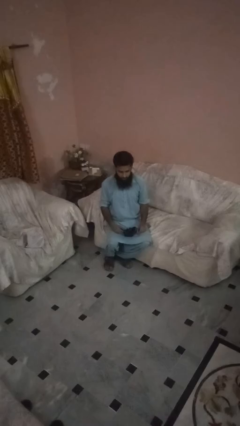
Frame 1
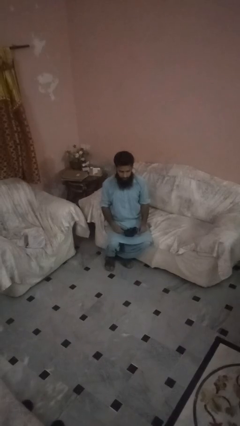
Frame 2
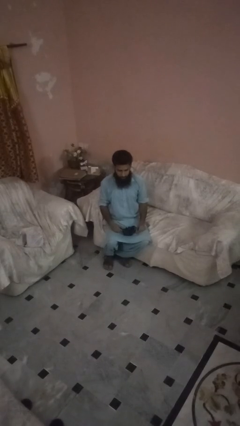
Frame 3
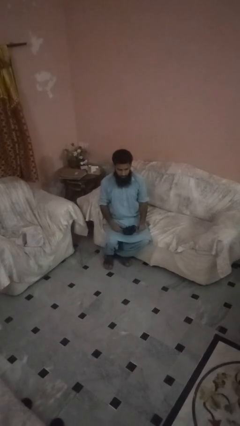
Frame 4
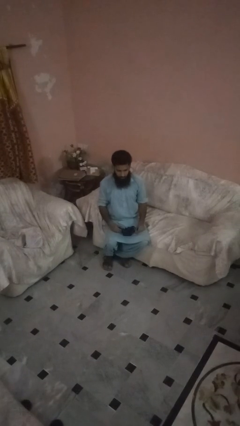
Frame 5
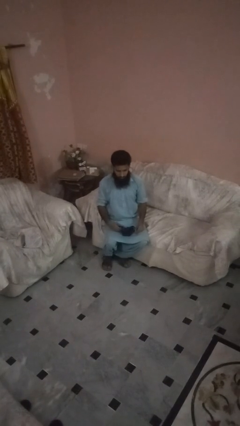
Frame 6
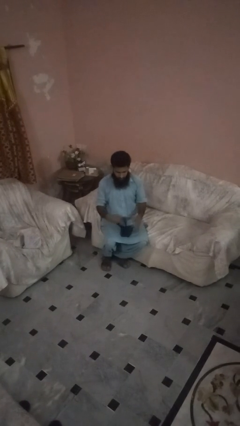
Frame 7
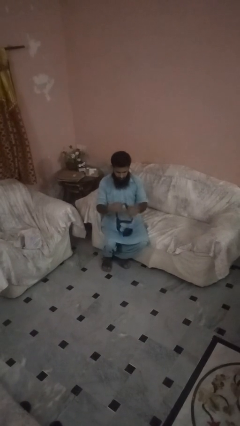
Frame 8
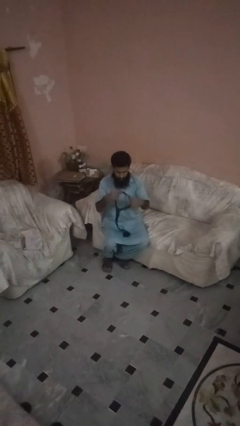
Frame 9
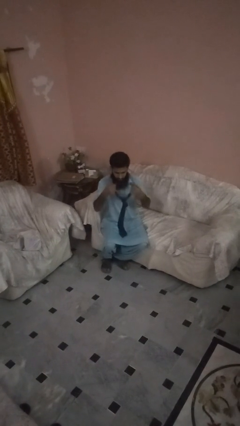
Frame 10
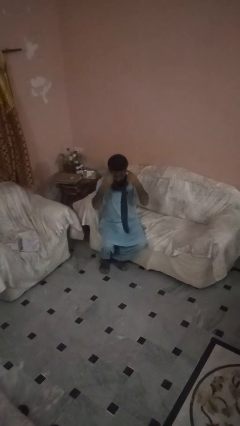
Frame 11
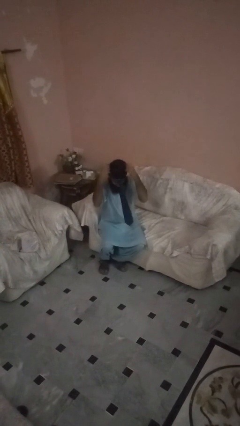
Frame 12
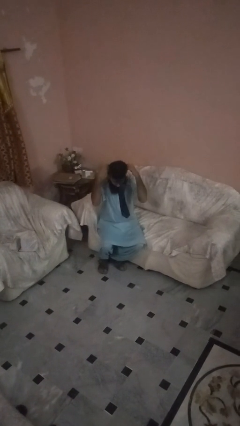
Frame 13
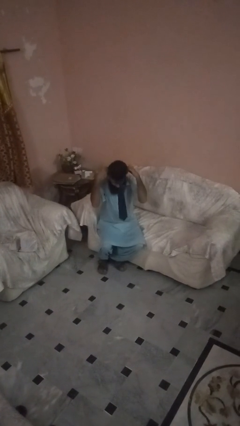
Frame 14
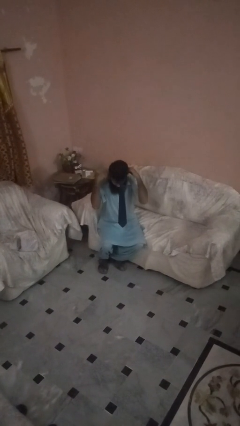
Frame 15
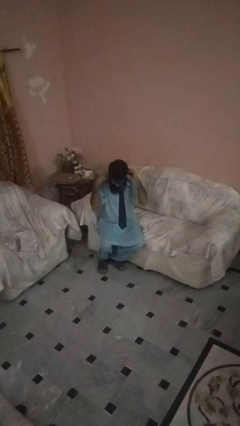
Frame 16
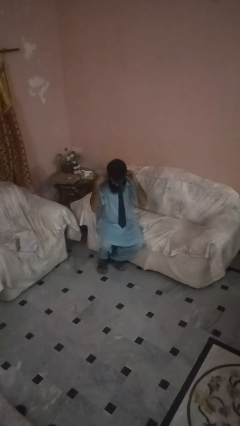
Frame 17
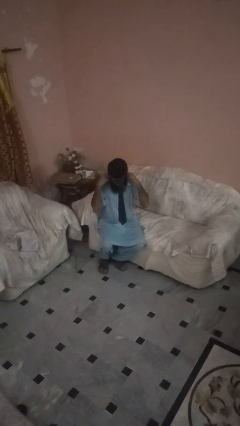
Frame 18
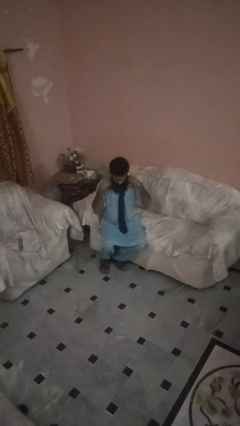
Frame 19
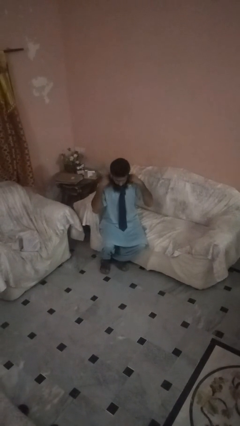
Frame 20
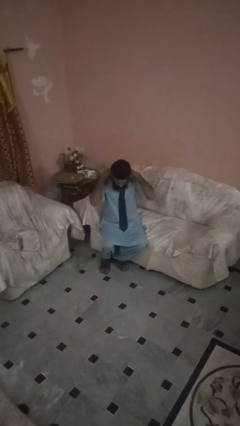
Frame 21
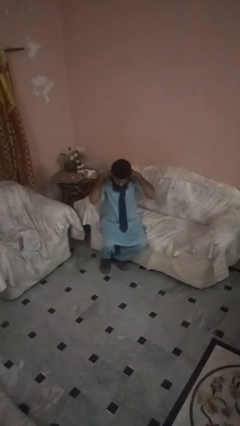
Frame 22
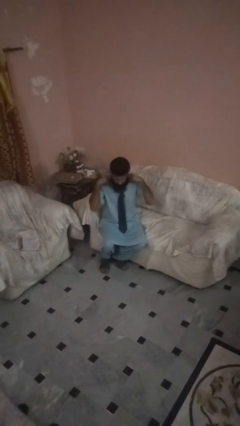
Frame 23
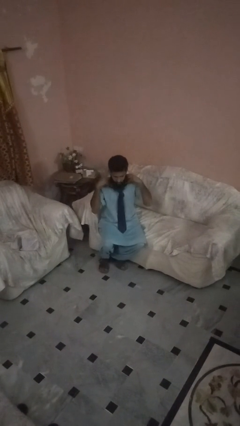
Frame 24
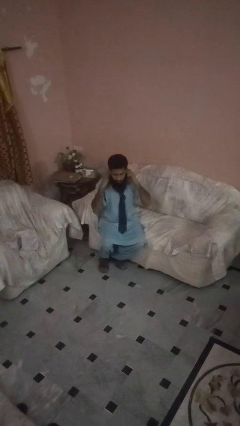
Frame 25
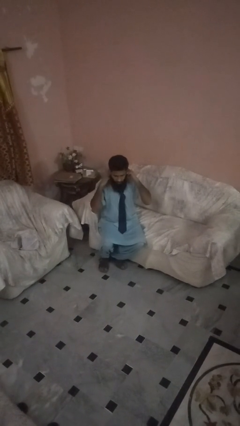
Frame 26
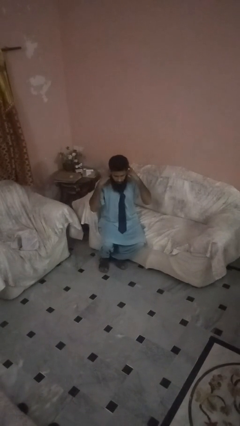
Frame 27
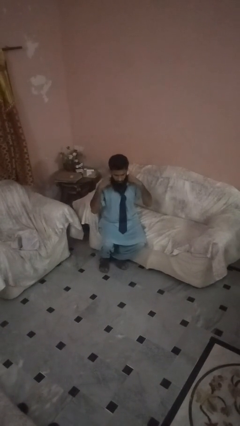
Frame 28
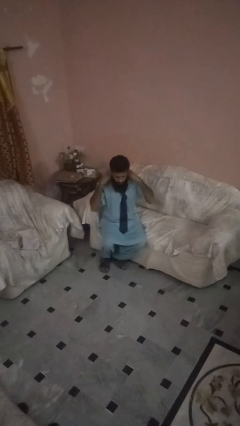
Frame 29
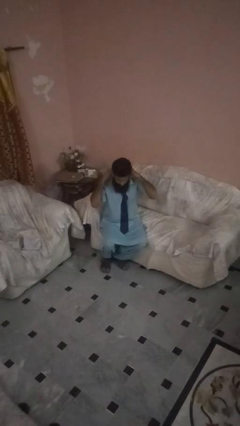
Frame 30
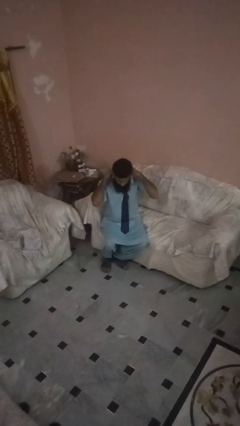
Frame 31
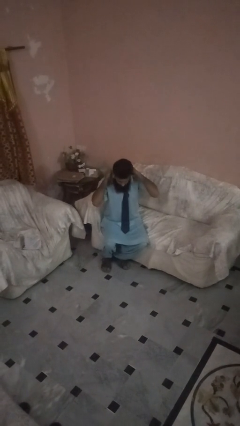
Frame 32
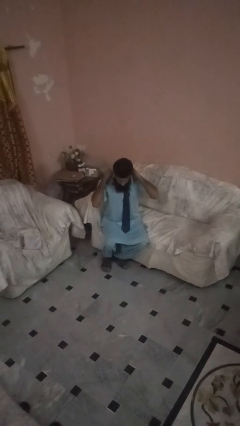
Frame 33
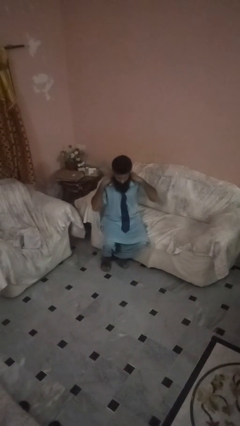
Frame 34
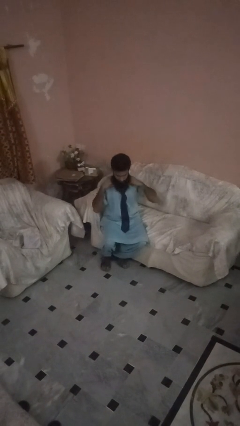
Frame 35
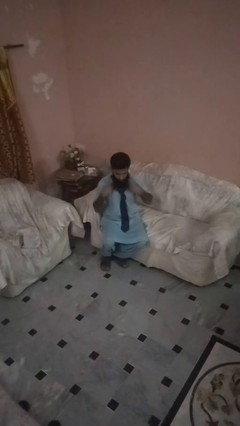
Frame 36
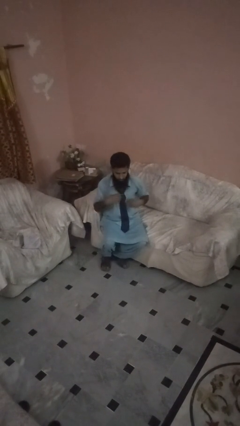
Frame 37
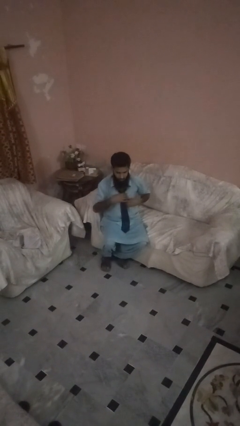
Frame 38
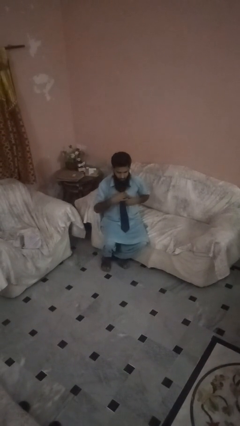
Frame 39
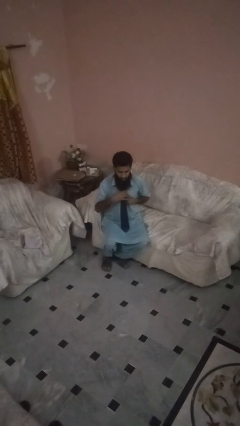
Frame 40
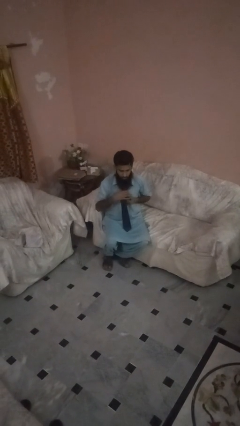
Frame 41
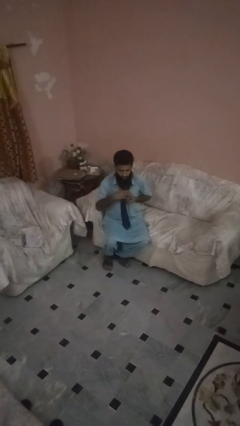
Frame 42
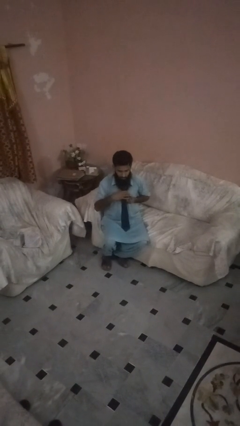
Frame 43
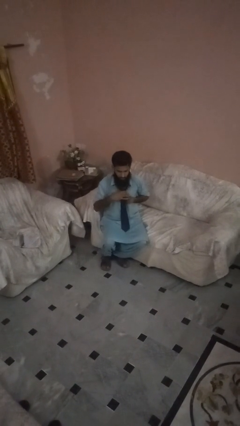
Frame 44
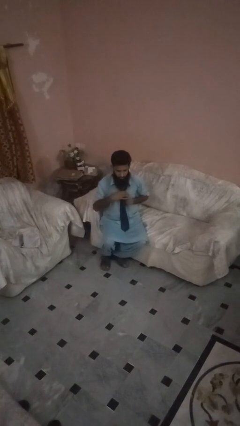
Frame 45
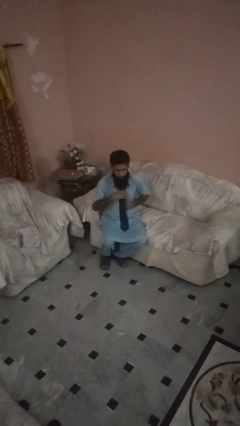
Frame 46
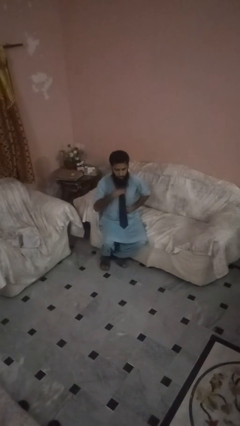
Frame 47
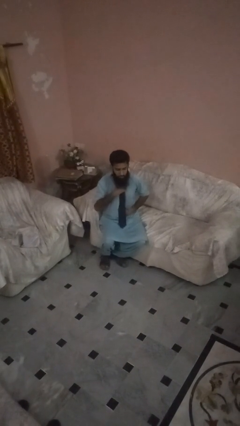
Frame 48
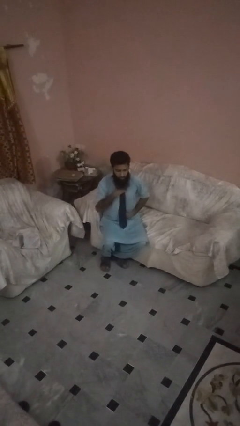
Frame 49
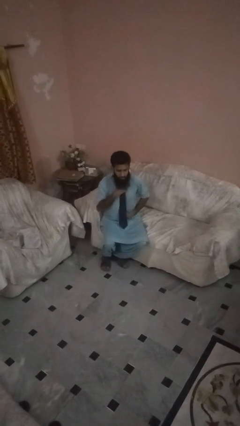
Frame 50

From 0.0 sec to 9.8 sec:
person puts on necktie

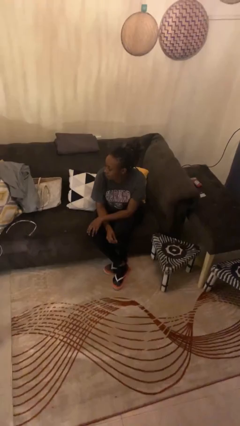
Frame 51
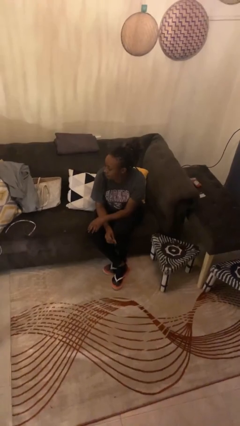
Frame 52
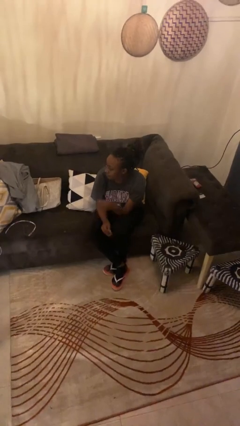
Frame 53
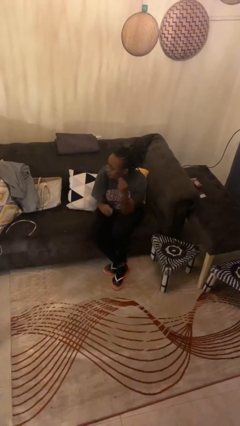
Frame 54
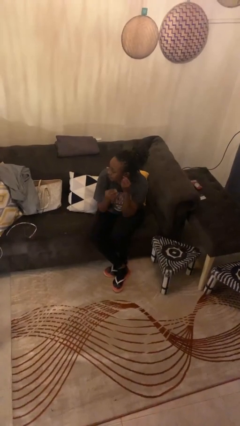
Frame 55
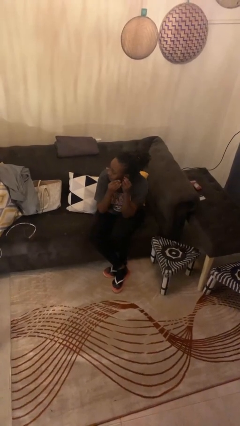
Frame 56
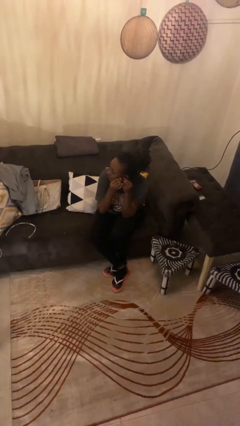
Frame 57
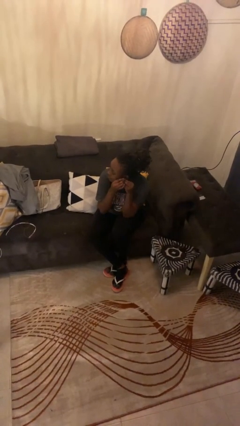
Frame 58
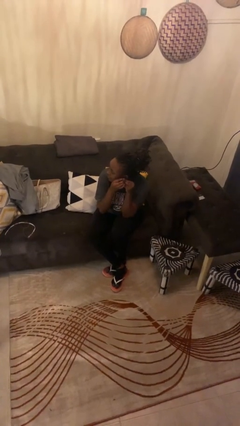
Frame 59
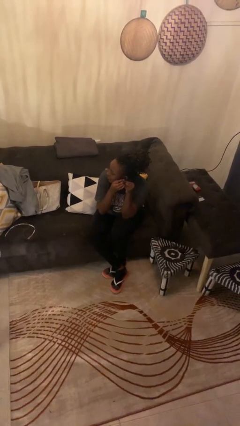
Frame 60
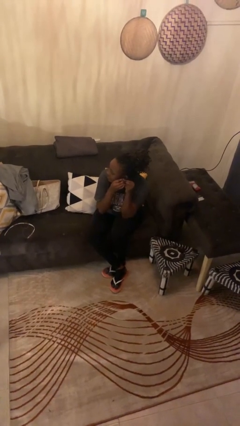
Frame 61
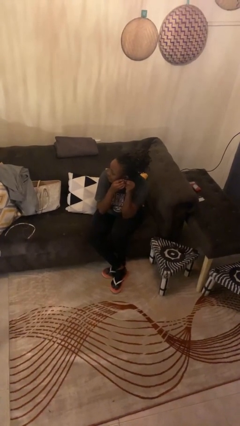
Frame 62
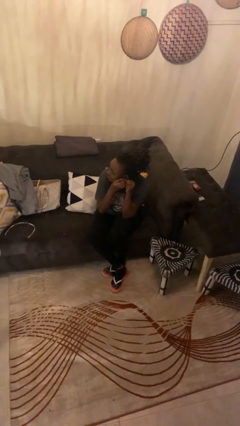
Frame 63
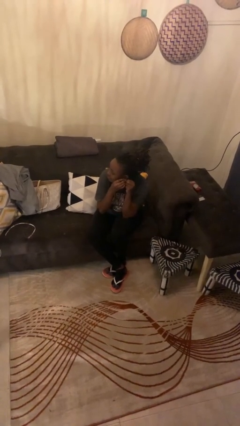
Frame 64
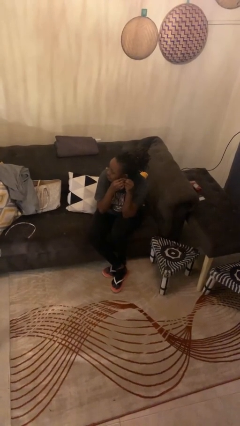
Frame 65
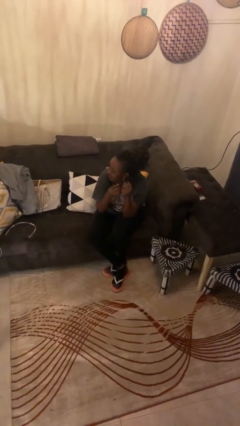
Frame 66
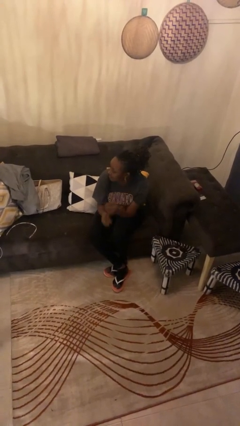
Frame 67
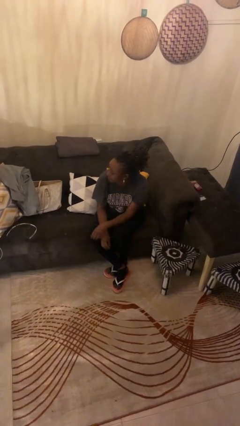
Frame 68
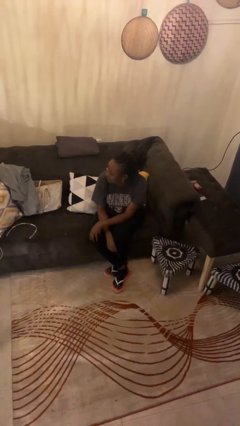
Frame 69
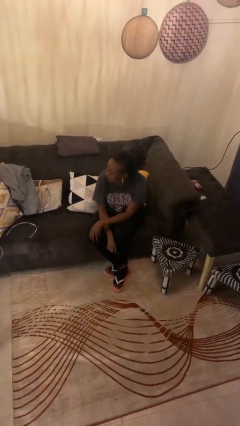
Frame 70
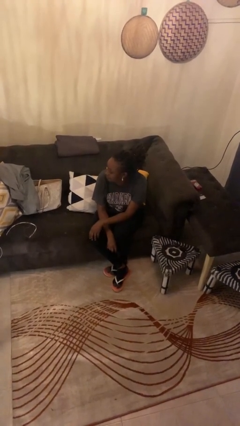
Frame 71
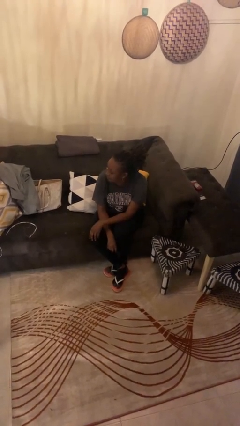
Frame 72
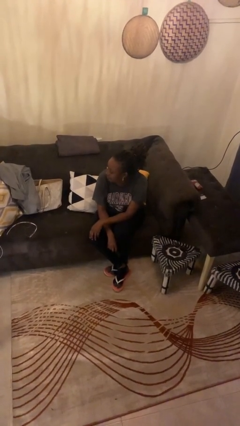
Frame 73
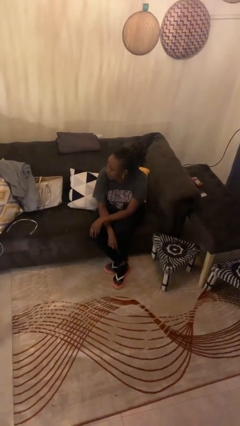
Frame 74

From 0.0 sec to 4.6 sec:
person puts on earrings

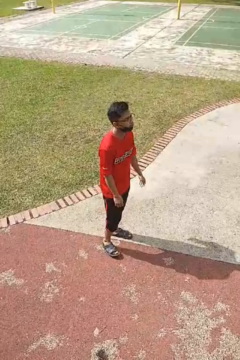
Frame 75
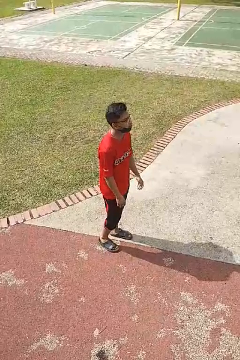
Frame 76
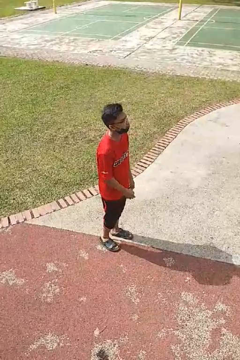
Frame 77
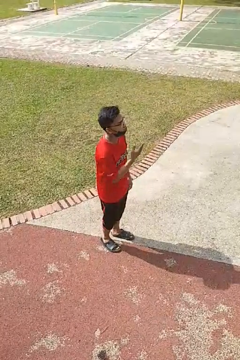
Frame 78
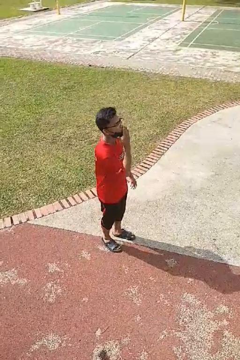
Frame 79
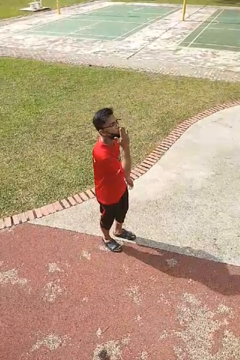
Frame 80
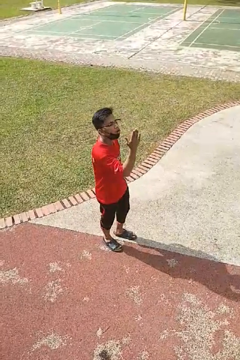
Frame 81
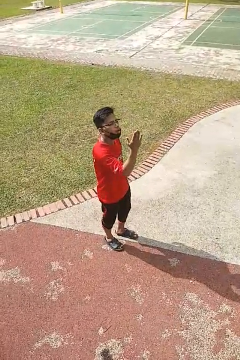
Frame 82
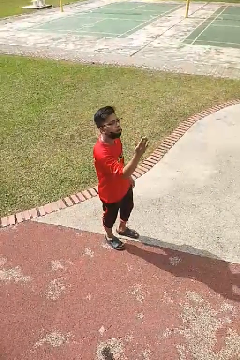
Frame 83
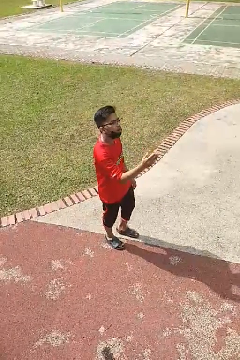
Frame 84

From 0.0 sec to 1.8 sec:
person gestures blow kiss

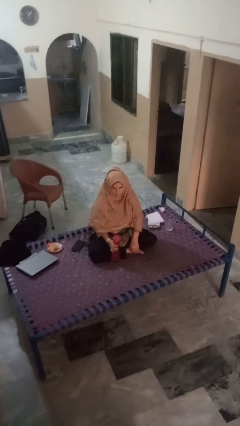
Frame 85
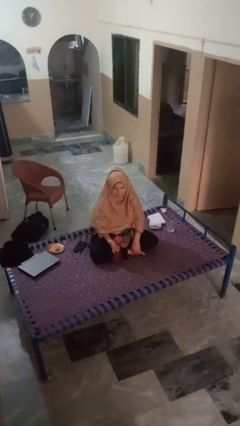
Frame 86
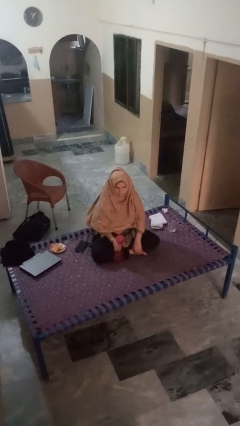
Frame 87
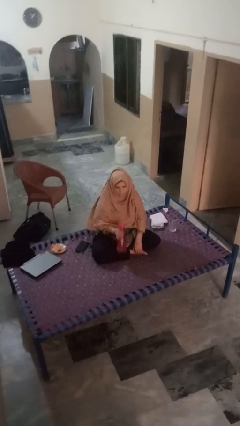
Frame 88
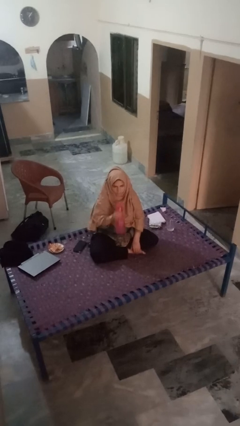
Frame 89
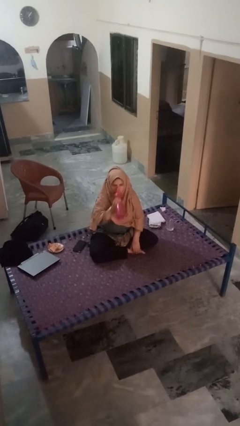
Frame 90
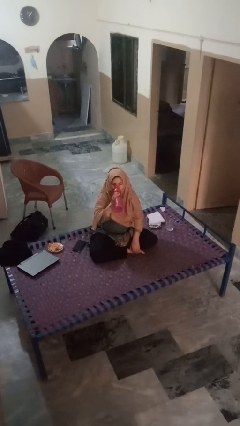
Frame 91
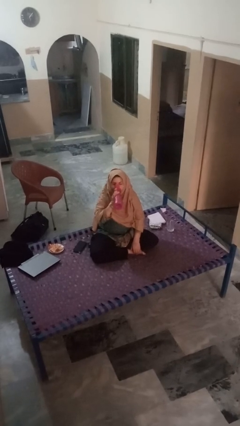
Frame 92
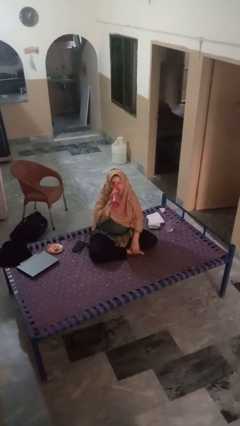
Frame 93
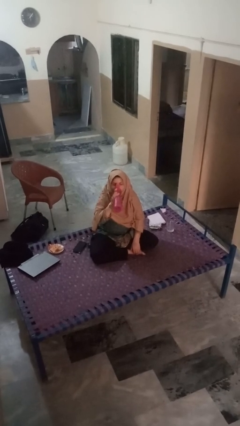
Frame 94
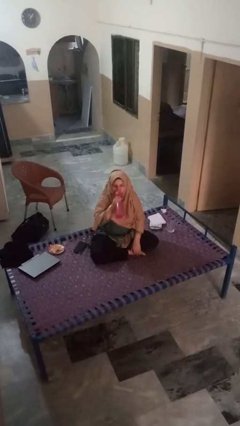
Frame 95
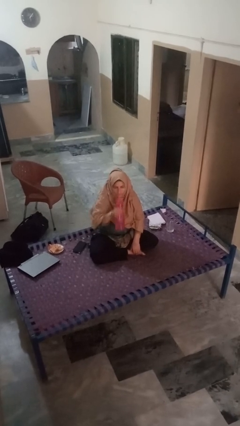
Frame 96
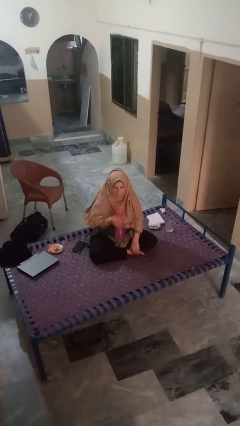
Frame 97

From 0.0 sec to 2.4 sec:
person drinks from bottle
